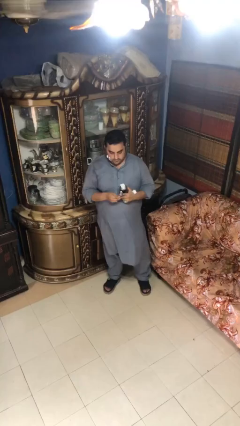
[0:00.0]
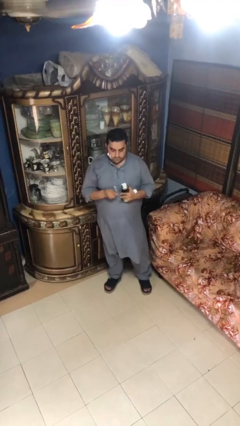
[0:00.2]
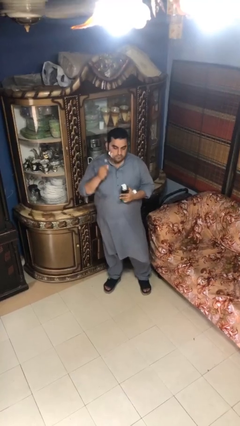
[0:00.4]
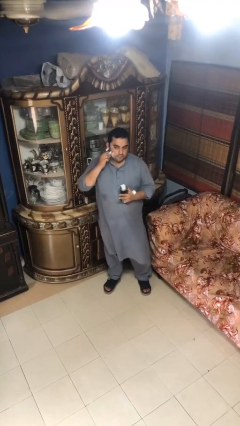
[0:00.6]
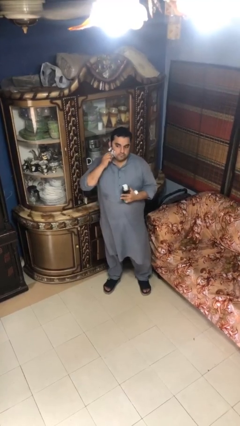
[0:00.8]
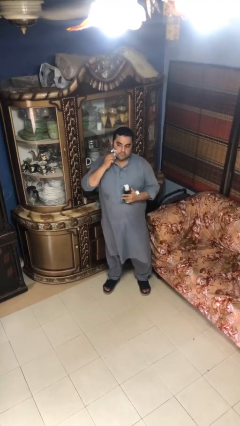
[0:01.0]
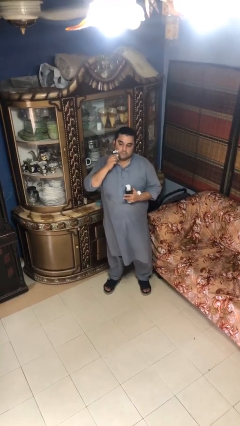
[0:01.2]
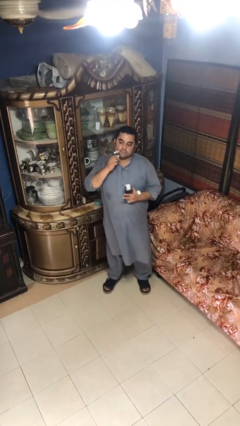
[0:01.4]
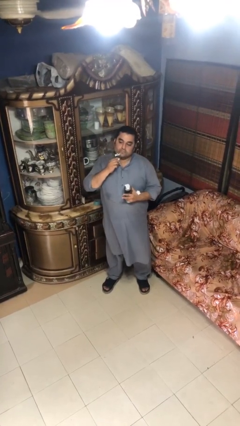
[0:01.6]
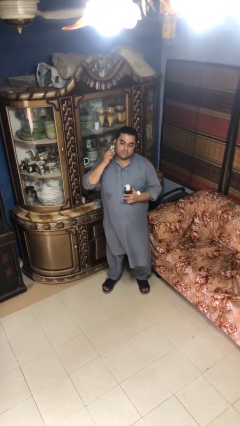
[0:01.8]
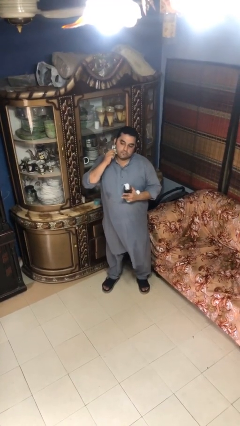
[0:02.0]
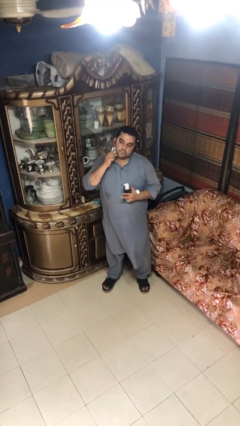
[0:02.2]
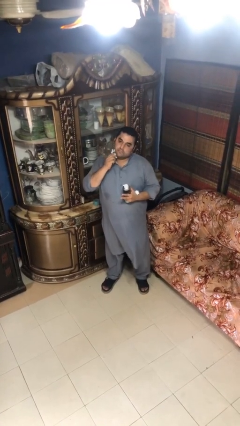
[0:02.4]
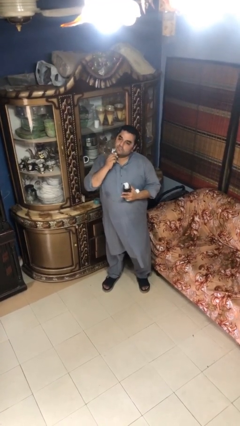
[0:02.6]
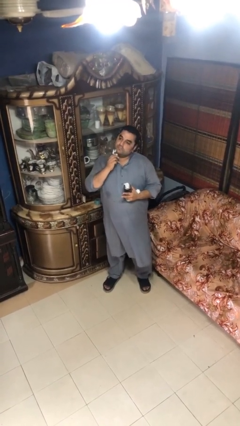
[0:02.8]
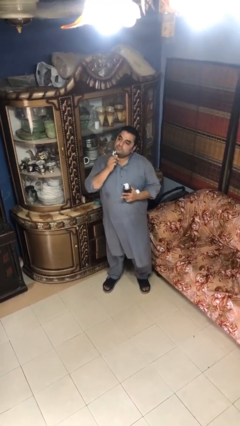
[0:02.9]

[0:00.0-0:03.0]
person shaves face

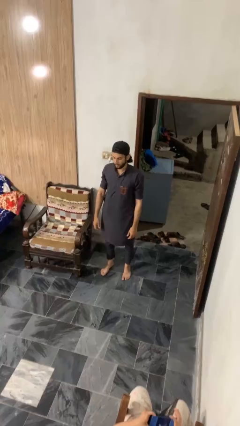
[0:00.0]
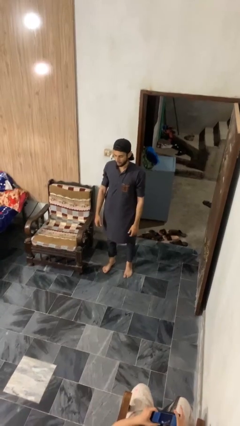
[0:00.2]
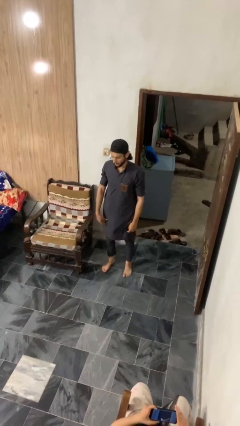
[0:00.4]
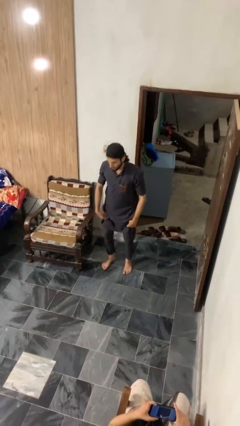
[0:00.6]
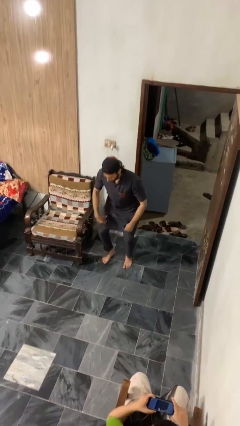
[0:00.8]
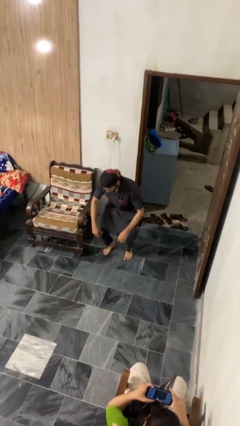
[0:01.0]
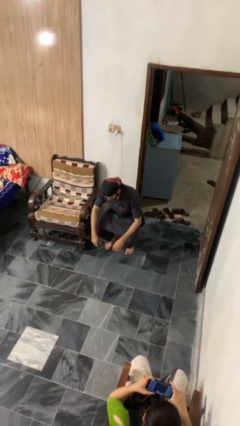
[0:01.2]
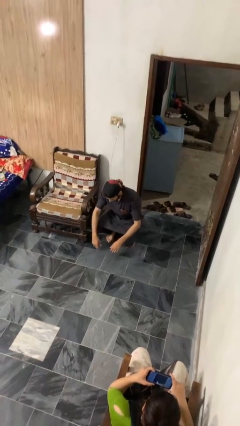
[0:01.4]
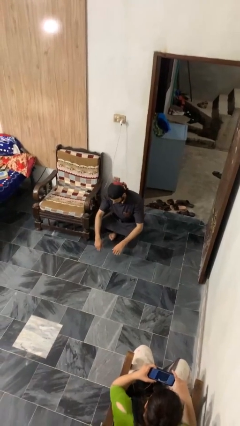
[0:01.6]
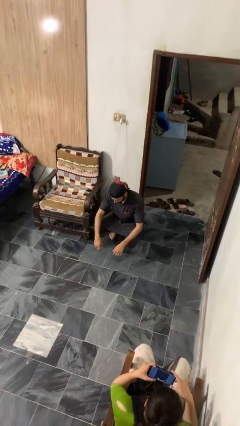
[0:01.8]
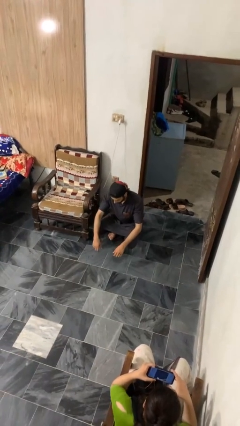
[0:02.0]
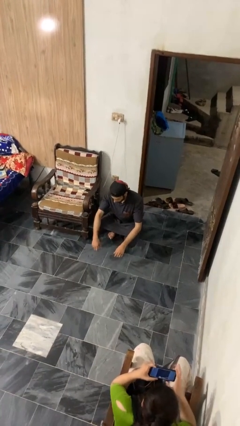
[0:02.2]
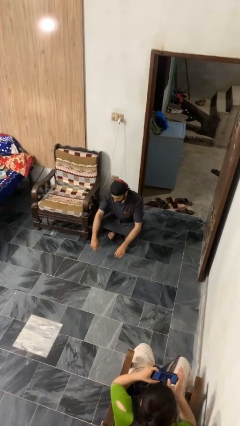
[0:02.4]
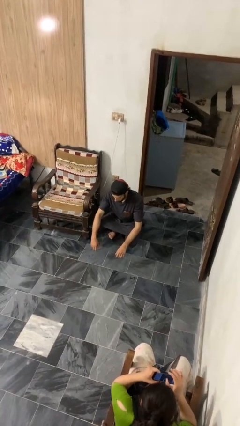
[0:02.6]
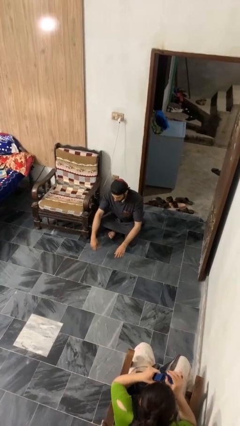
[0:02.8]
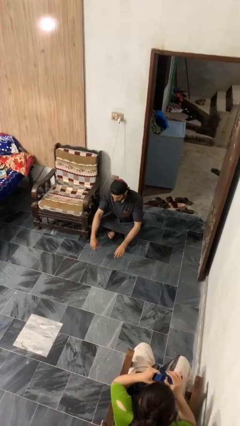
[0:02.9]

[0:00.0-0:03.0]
person squats

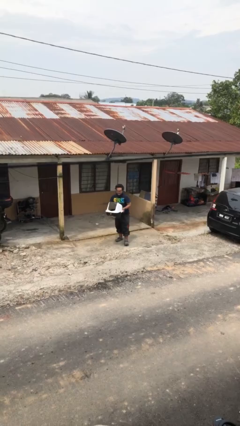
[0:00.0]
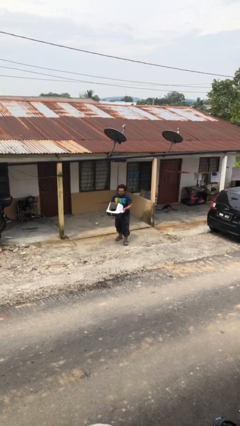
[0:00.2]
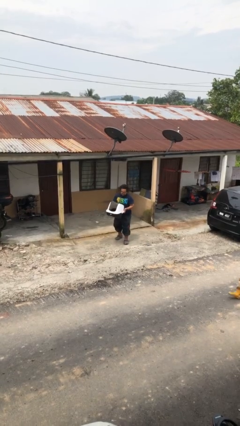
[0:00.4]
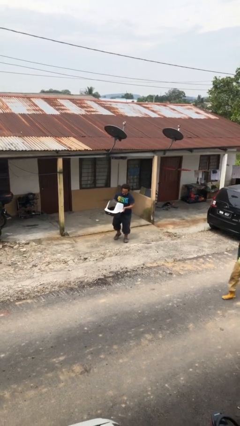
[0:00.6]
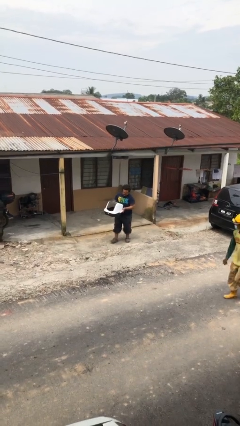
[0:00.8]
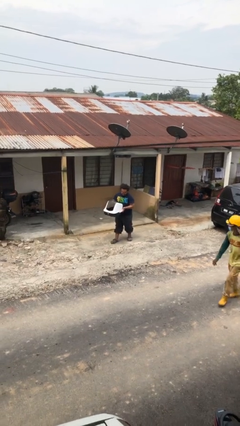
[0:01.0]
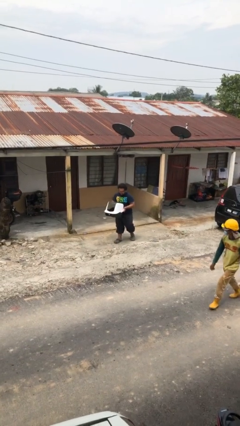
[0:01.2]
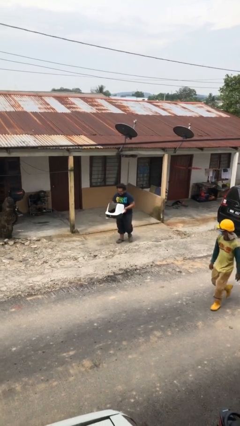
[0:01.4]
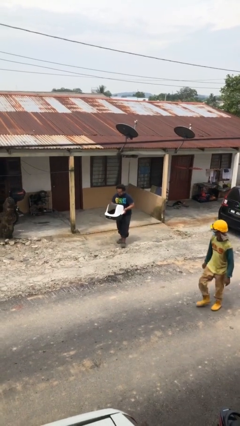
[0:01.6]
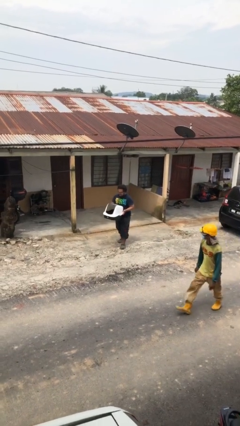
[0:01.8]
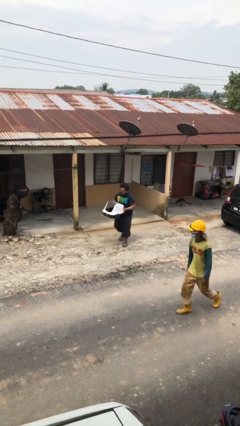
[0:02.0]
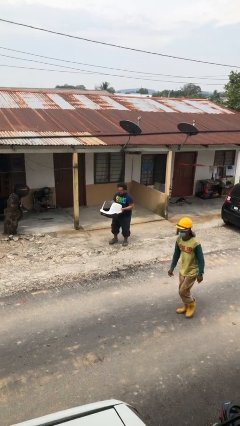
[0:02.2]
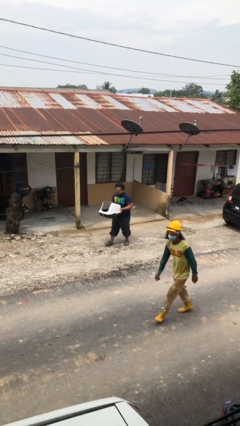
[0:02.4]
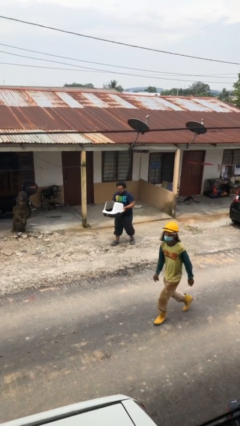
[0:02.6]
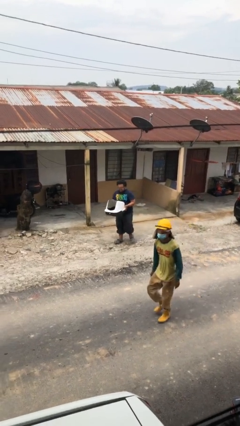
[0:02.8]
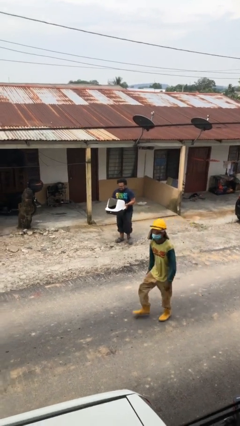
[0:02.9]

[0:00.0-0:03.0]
person carries heavy object

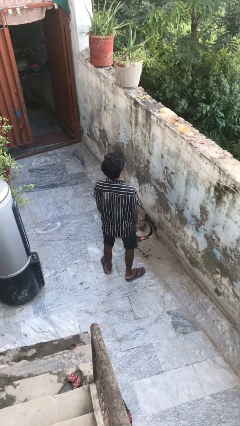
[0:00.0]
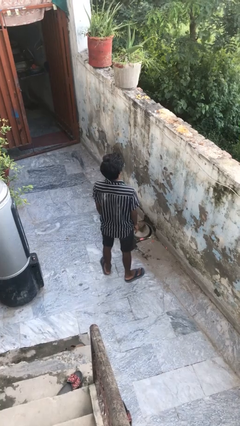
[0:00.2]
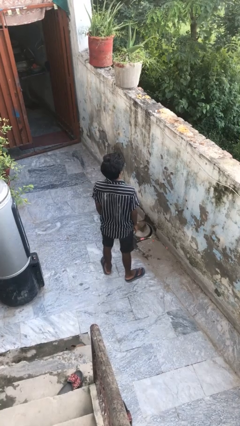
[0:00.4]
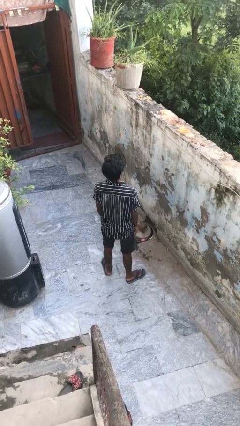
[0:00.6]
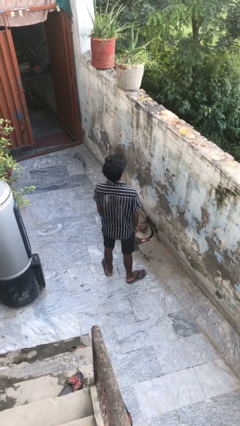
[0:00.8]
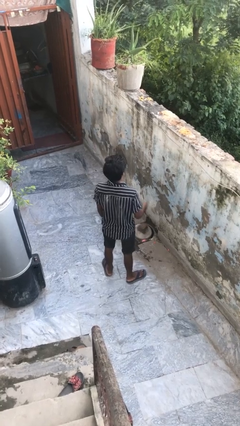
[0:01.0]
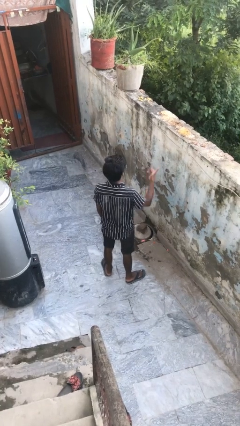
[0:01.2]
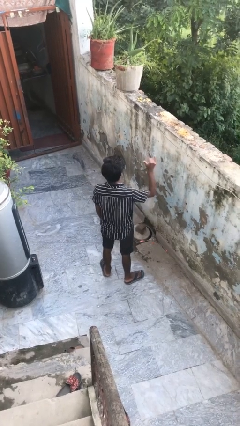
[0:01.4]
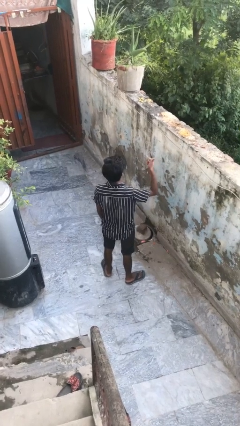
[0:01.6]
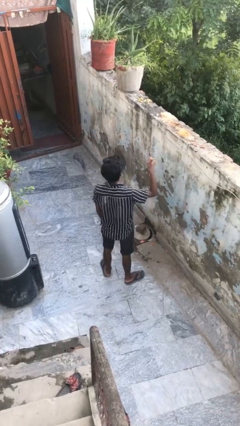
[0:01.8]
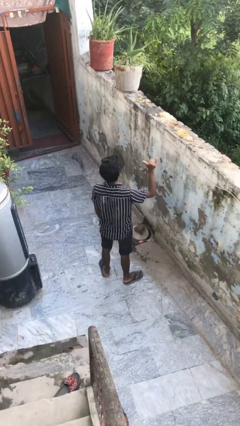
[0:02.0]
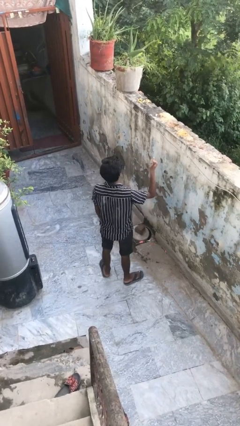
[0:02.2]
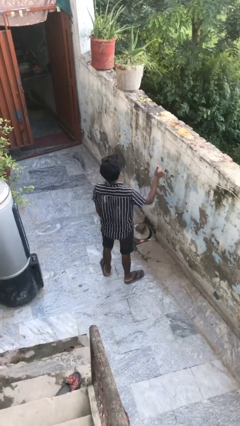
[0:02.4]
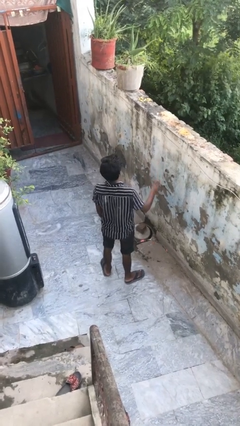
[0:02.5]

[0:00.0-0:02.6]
person gestures hang loose

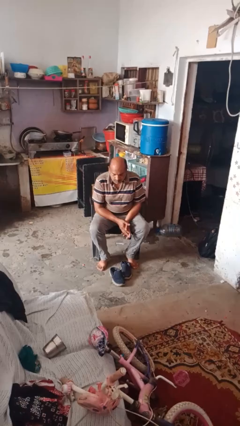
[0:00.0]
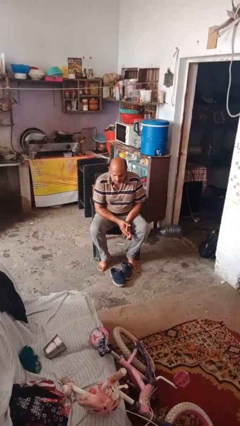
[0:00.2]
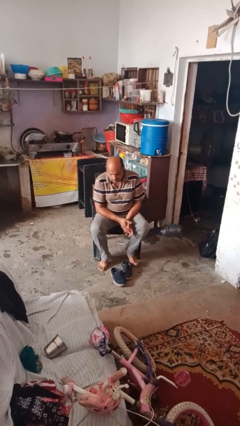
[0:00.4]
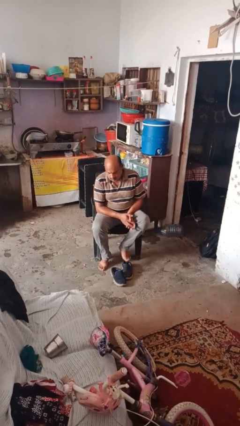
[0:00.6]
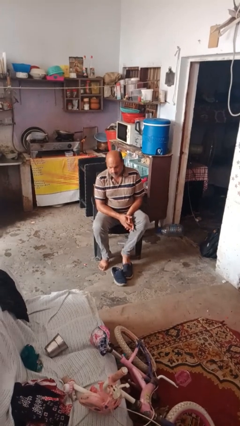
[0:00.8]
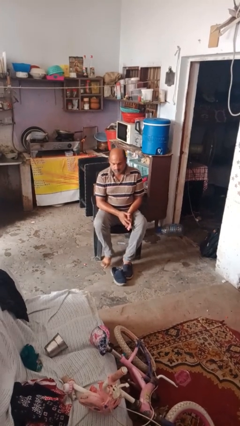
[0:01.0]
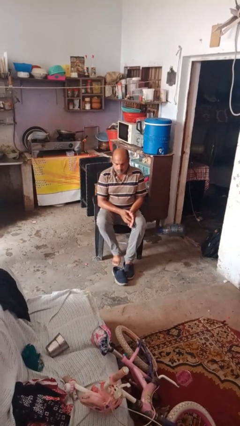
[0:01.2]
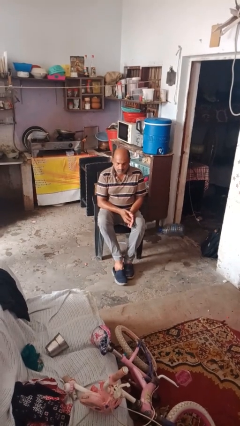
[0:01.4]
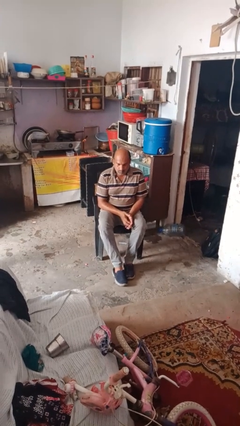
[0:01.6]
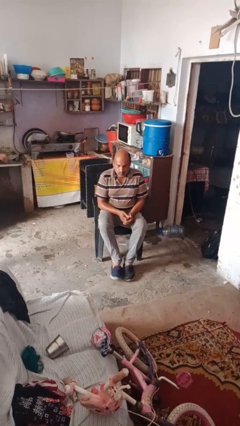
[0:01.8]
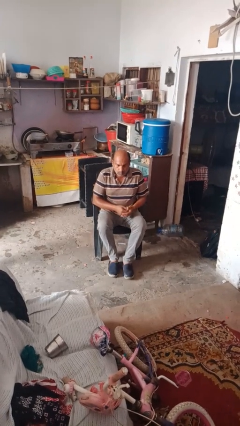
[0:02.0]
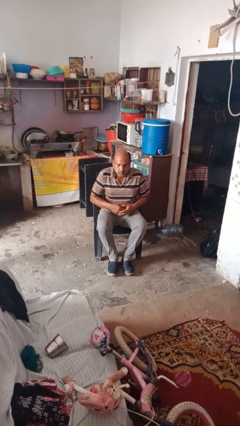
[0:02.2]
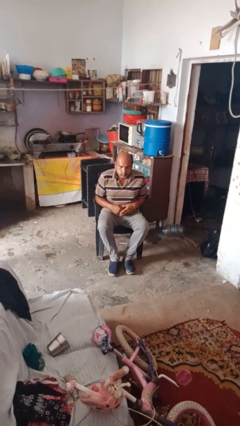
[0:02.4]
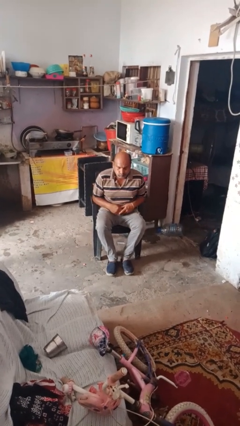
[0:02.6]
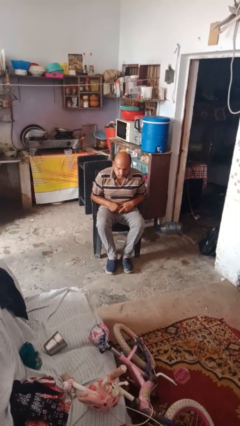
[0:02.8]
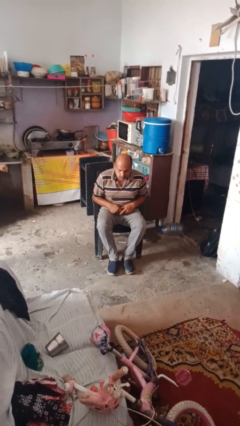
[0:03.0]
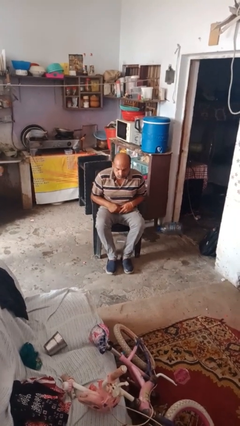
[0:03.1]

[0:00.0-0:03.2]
person puts on shoes

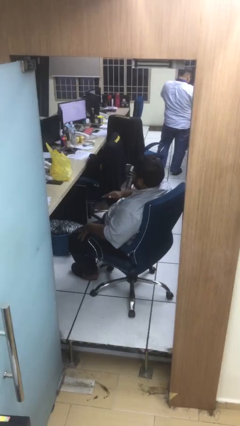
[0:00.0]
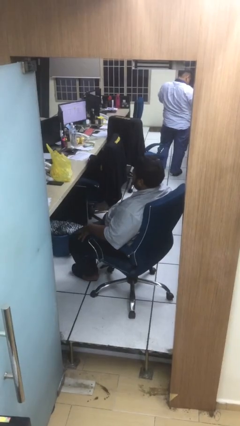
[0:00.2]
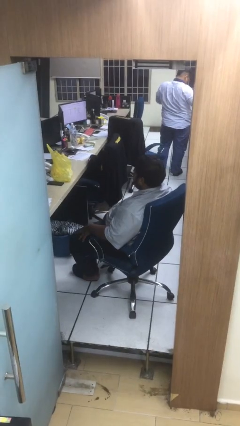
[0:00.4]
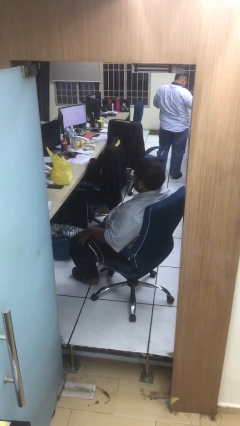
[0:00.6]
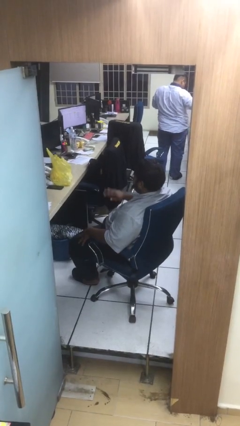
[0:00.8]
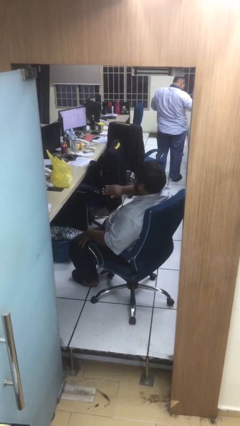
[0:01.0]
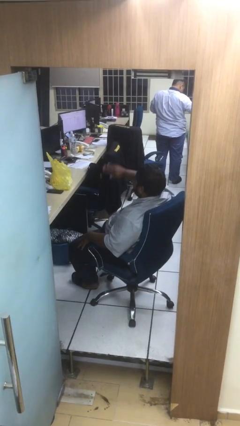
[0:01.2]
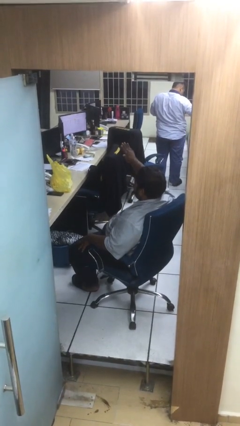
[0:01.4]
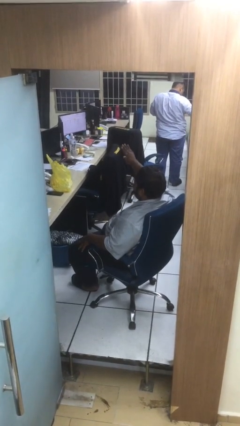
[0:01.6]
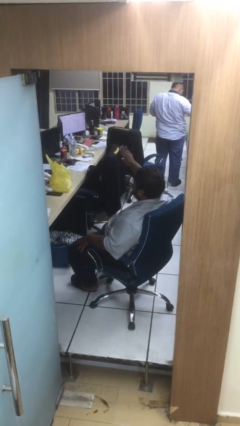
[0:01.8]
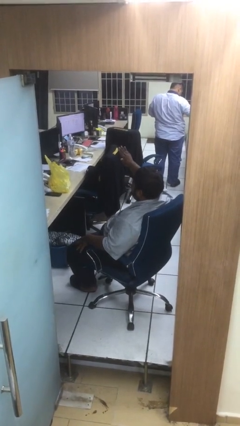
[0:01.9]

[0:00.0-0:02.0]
person gestures swipe up

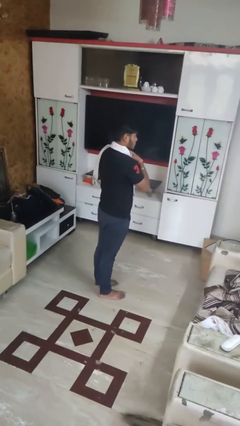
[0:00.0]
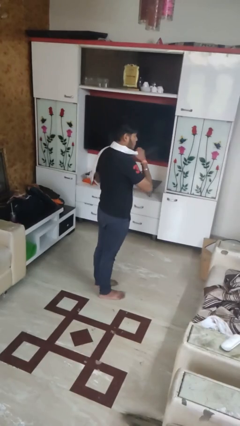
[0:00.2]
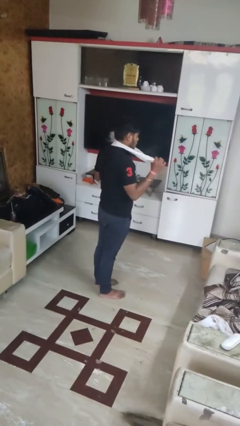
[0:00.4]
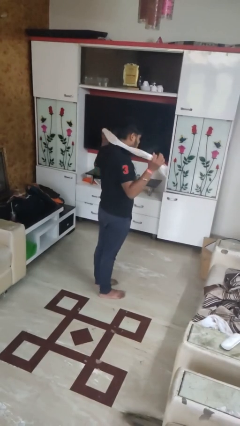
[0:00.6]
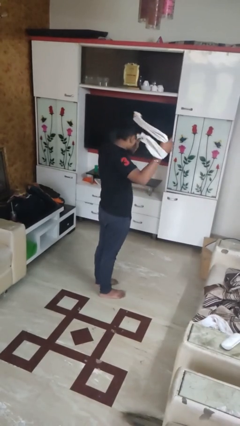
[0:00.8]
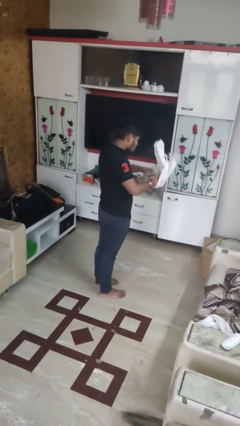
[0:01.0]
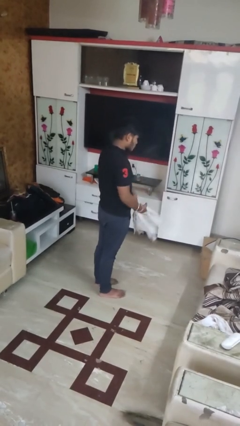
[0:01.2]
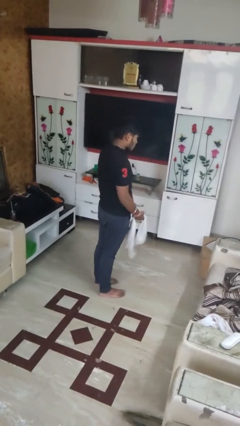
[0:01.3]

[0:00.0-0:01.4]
person takes off scarf
